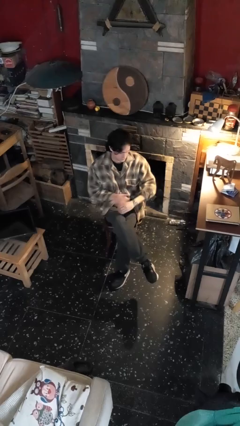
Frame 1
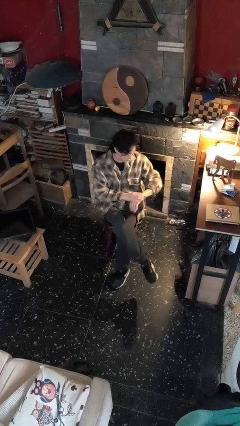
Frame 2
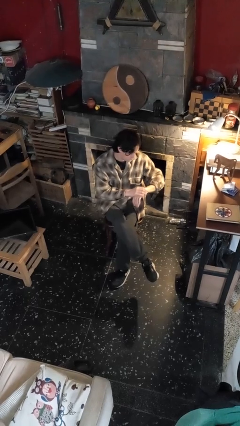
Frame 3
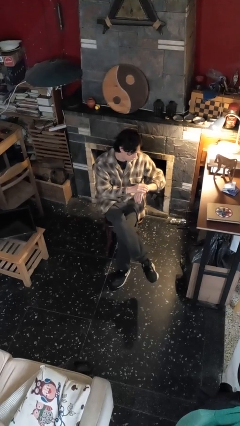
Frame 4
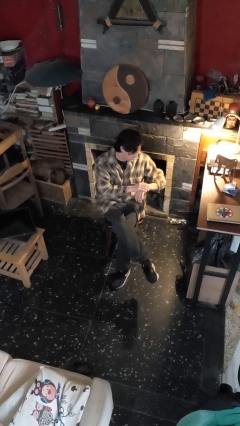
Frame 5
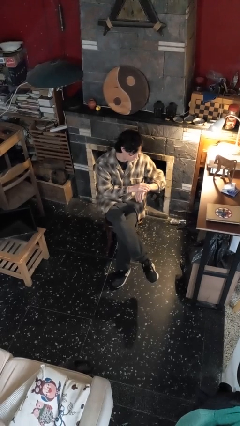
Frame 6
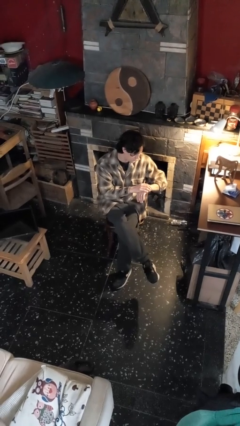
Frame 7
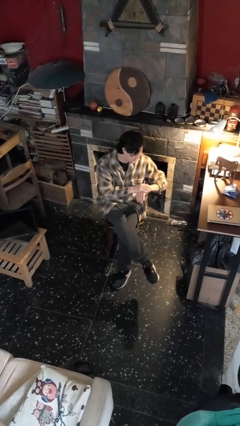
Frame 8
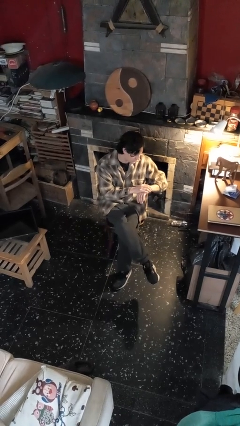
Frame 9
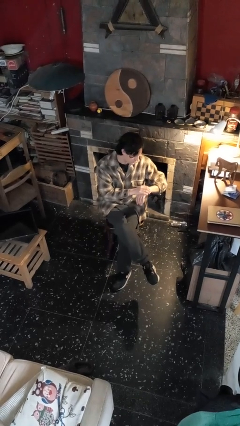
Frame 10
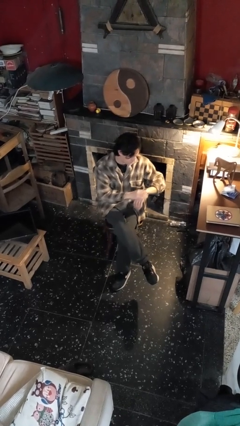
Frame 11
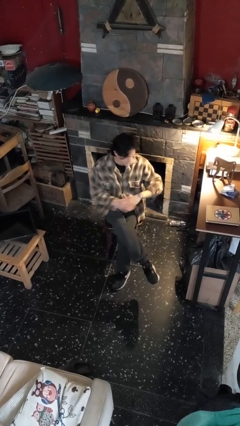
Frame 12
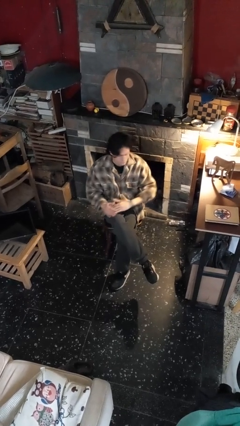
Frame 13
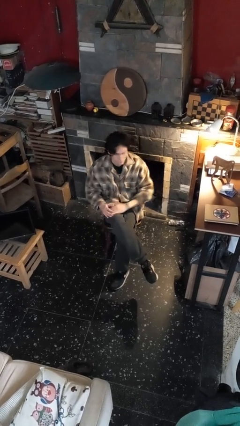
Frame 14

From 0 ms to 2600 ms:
person looks at wristwatch

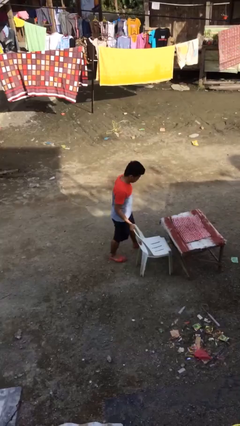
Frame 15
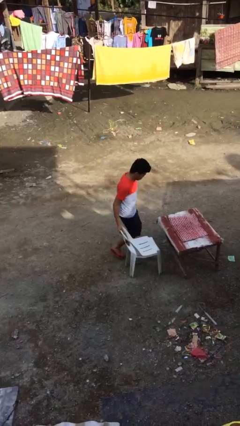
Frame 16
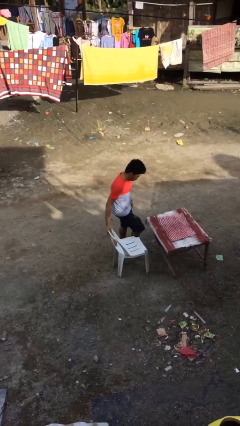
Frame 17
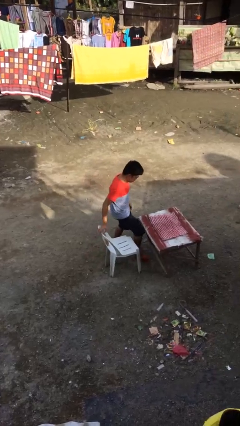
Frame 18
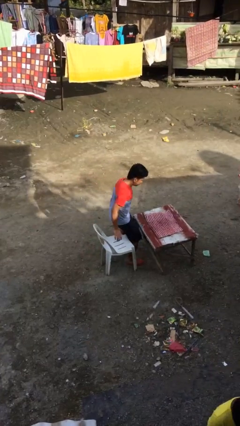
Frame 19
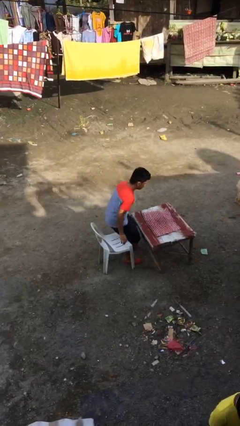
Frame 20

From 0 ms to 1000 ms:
person stands up

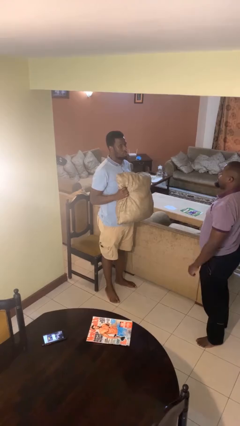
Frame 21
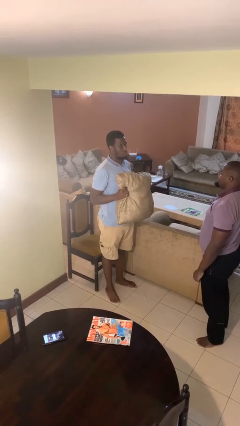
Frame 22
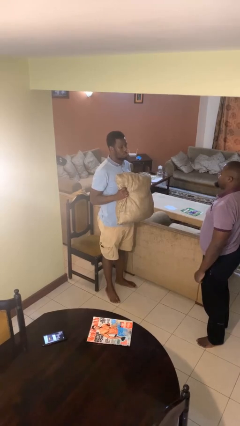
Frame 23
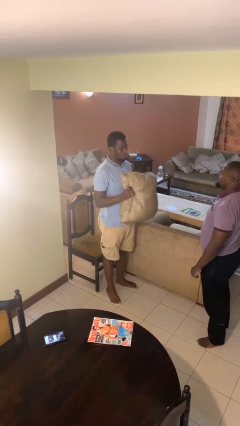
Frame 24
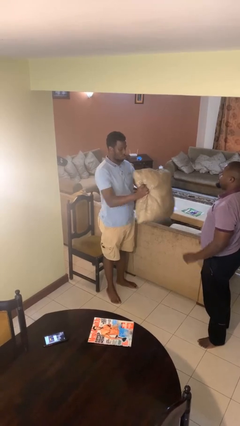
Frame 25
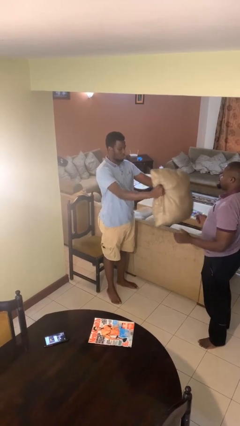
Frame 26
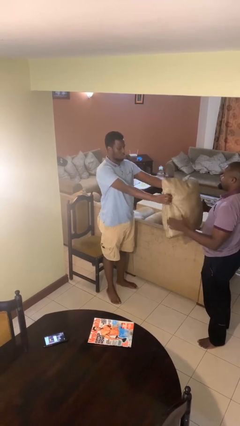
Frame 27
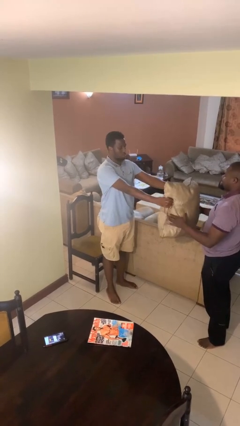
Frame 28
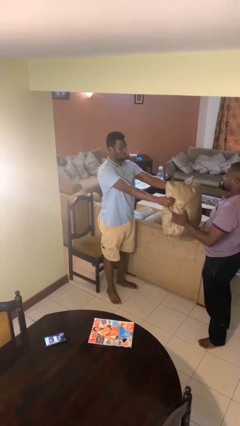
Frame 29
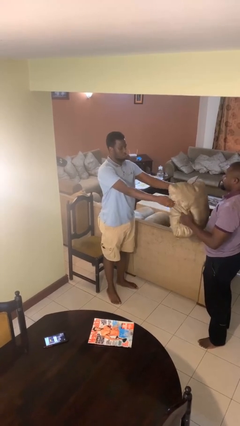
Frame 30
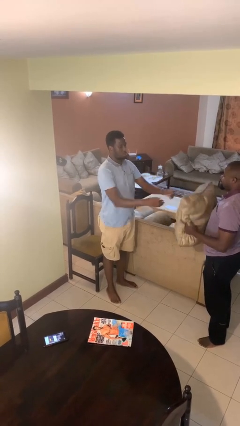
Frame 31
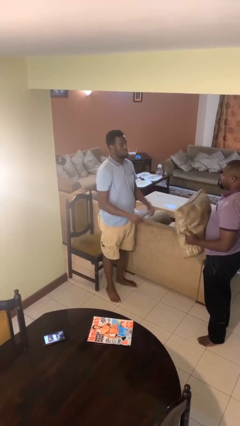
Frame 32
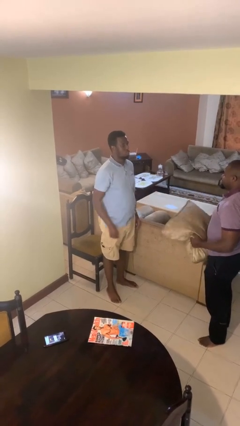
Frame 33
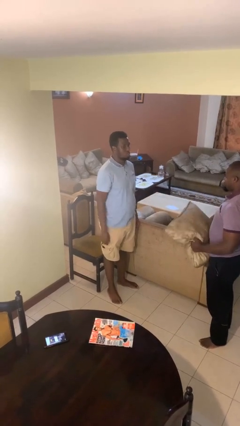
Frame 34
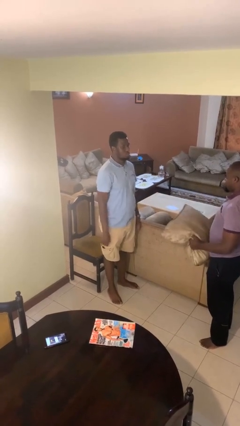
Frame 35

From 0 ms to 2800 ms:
person transfers object to person

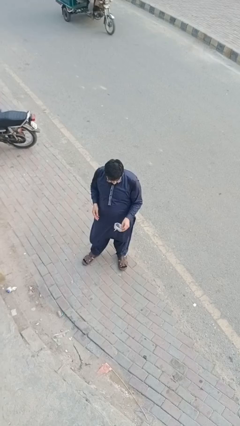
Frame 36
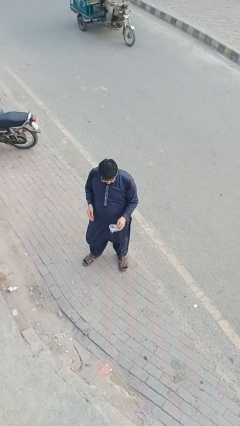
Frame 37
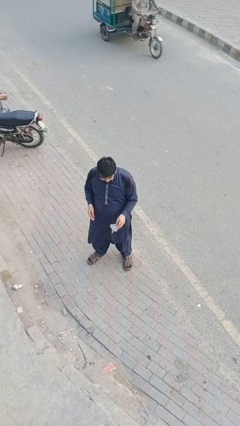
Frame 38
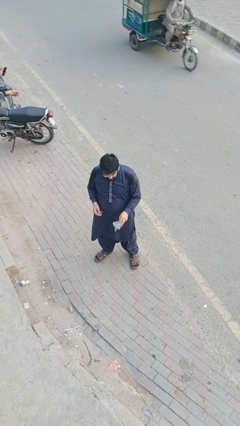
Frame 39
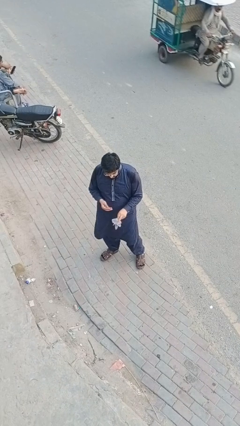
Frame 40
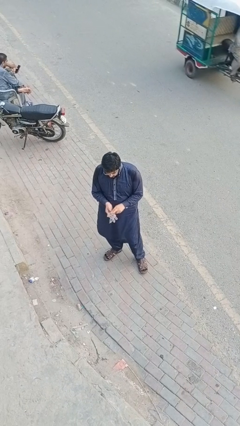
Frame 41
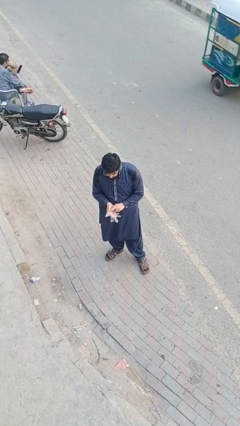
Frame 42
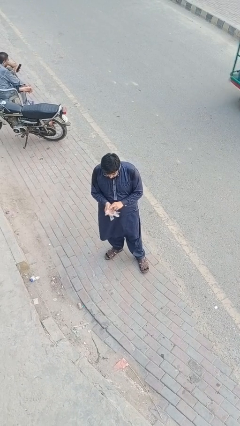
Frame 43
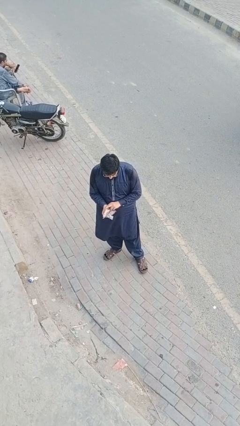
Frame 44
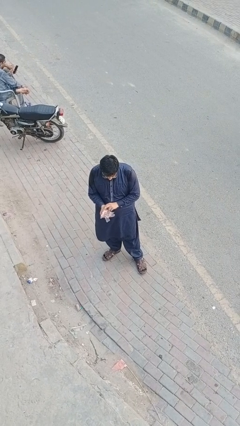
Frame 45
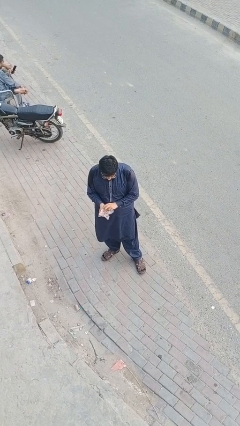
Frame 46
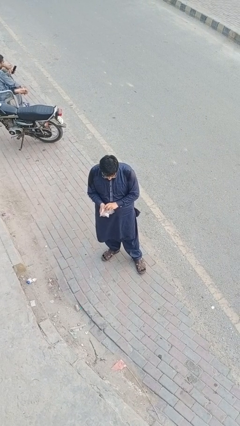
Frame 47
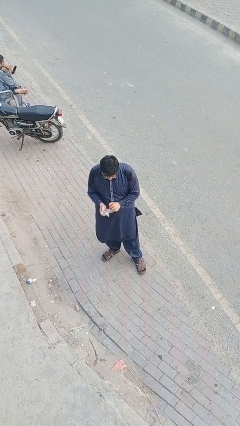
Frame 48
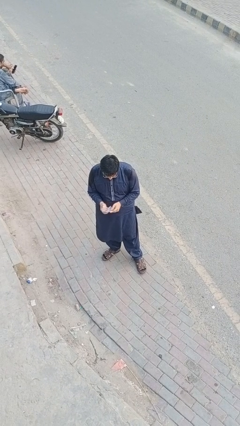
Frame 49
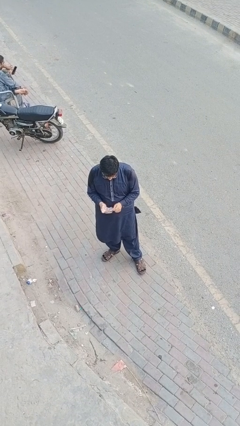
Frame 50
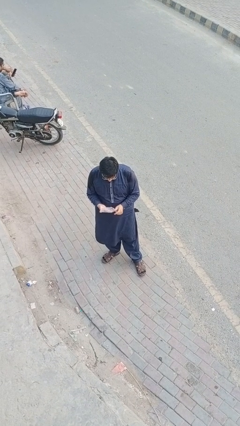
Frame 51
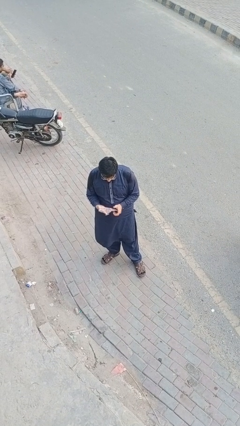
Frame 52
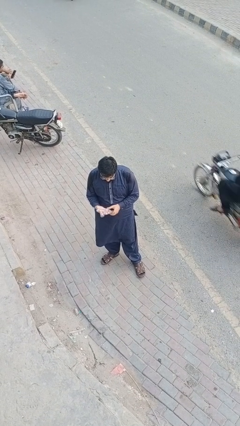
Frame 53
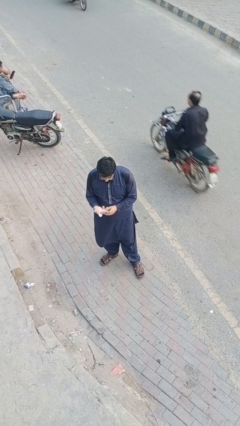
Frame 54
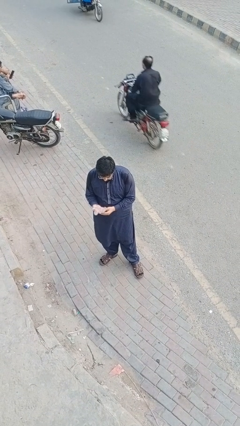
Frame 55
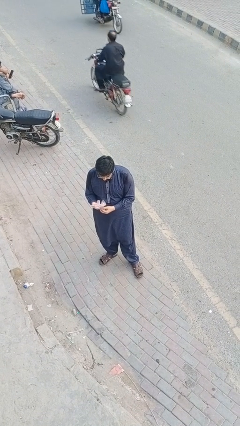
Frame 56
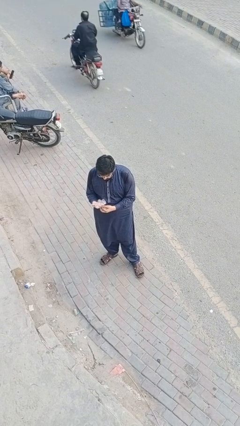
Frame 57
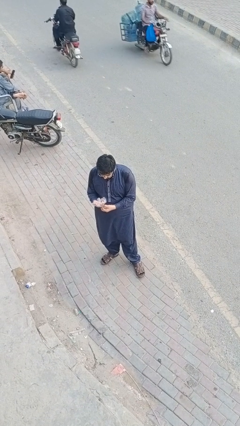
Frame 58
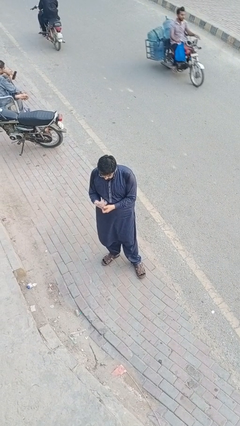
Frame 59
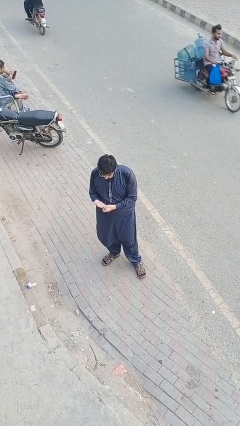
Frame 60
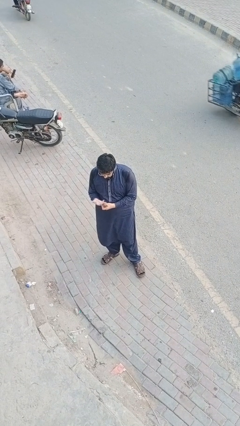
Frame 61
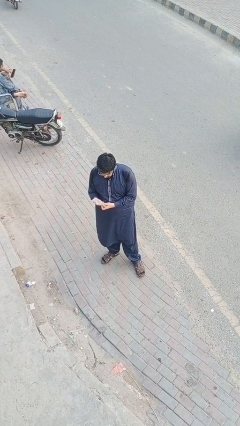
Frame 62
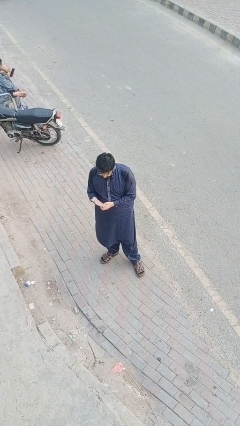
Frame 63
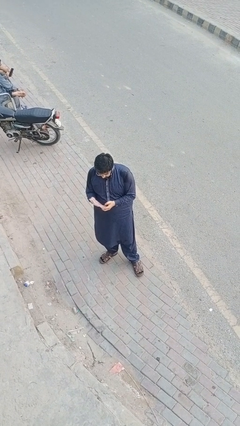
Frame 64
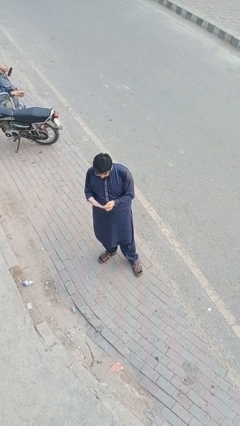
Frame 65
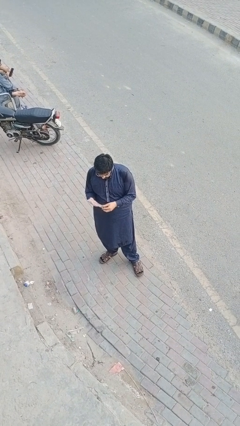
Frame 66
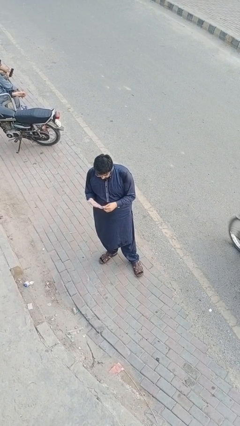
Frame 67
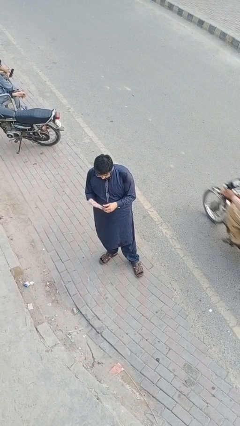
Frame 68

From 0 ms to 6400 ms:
person puts on gloves

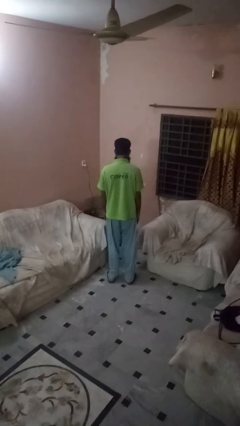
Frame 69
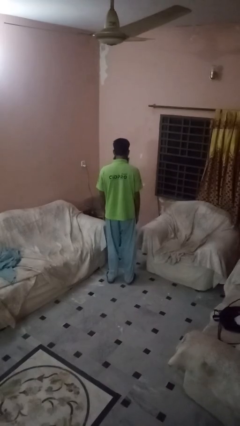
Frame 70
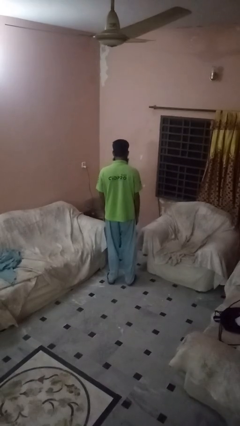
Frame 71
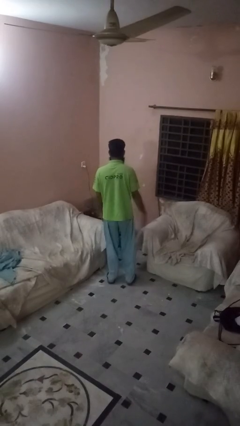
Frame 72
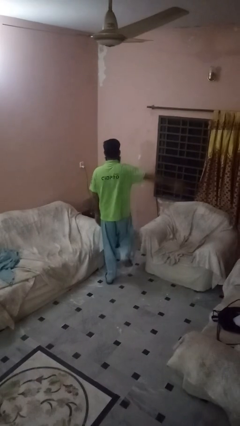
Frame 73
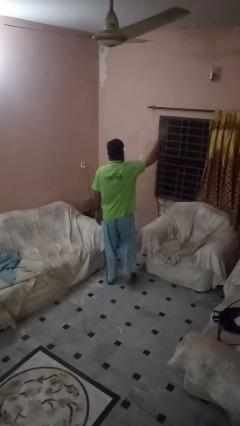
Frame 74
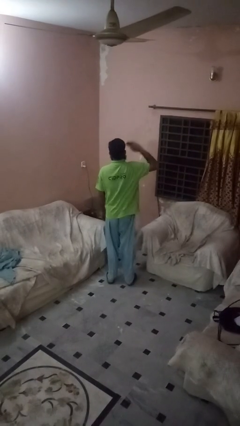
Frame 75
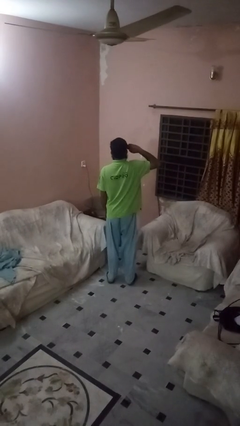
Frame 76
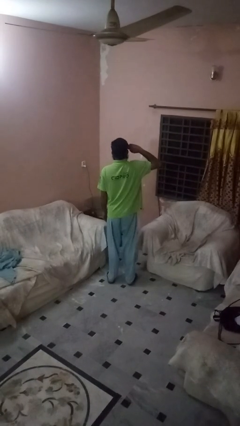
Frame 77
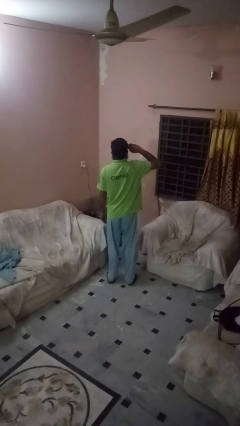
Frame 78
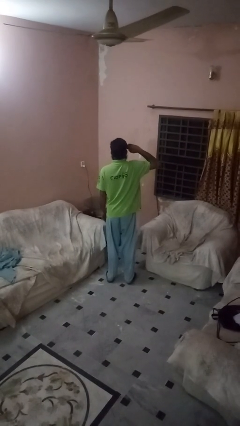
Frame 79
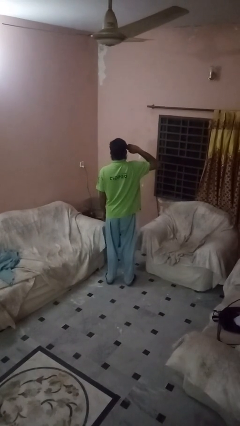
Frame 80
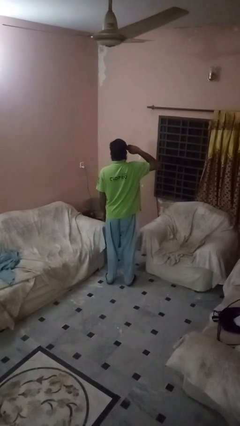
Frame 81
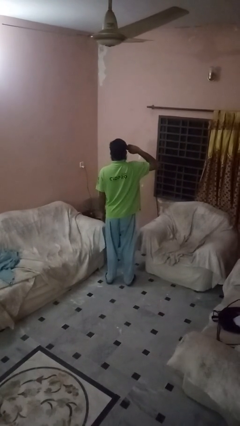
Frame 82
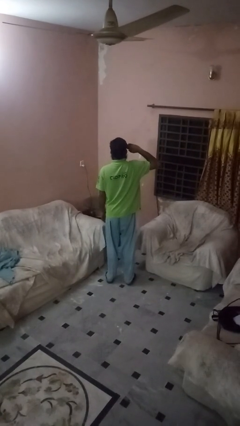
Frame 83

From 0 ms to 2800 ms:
person salutes

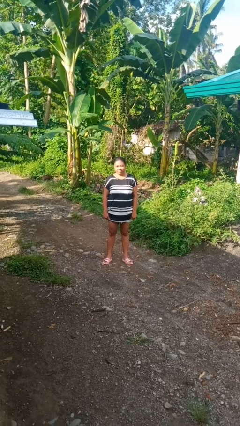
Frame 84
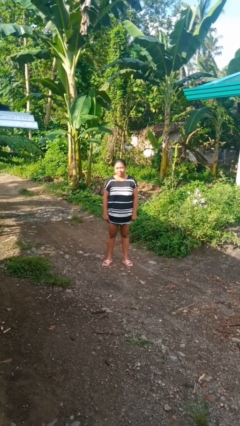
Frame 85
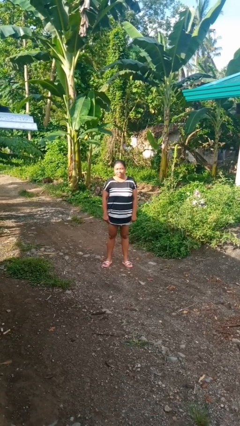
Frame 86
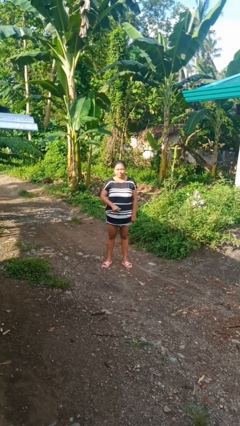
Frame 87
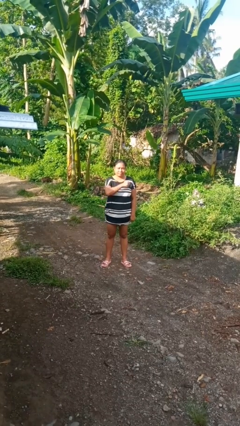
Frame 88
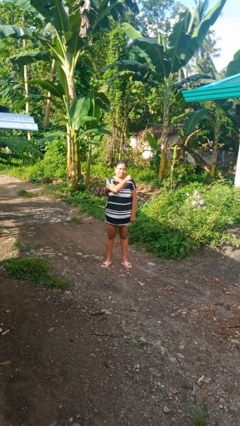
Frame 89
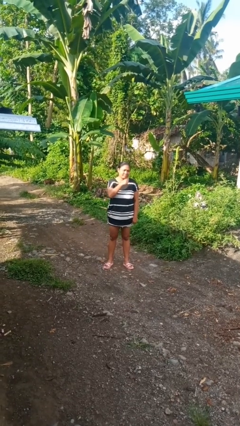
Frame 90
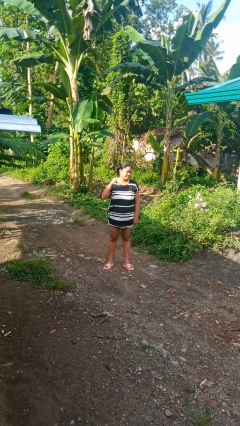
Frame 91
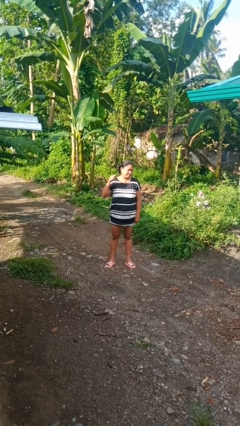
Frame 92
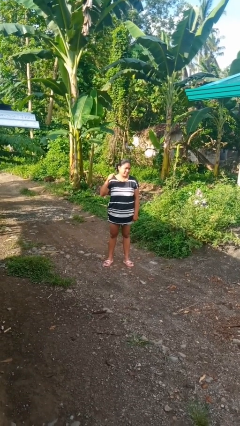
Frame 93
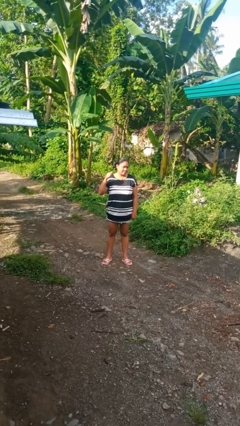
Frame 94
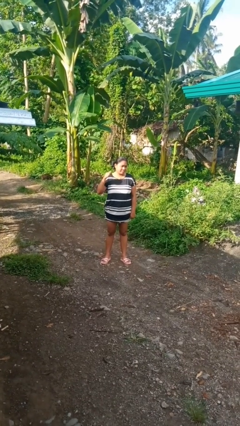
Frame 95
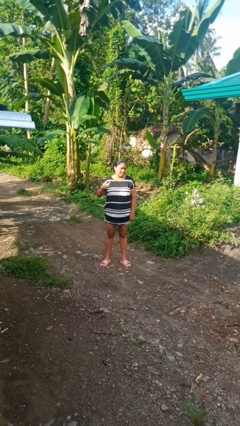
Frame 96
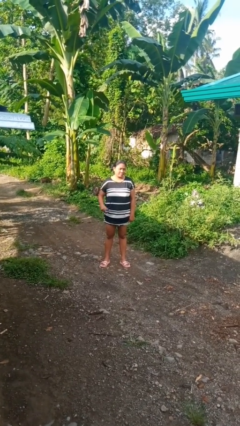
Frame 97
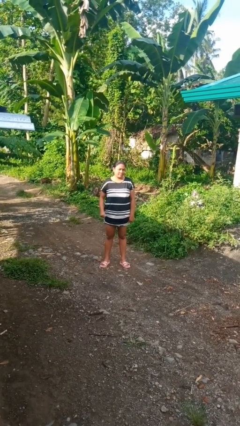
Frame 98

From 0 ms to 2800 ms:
person gestures cut
